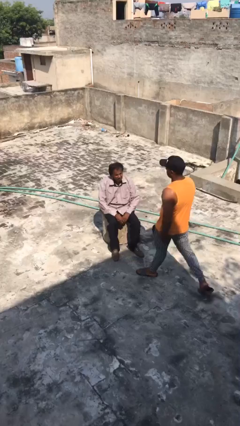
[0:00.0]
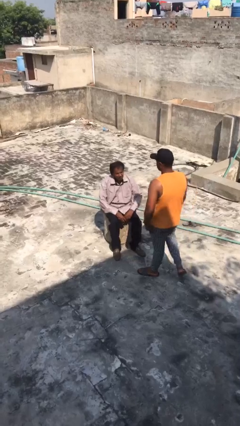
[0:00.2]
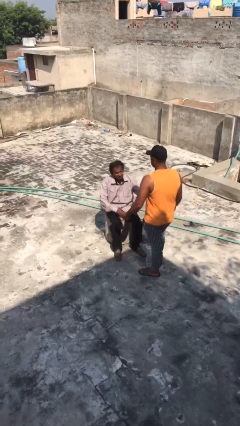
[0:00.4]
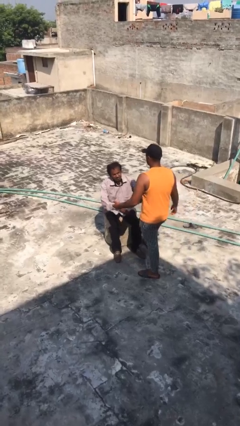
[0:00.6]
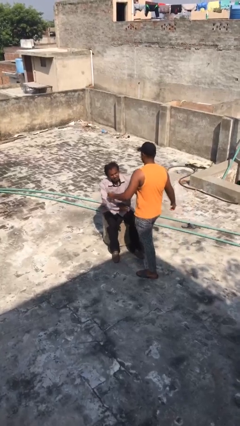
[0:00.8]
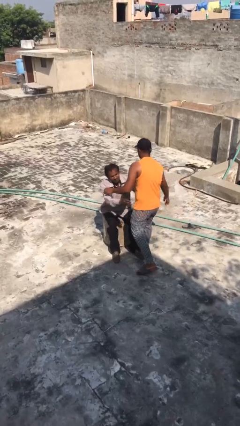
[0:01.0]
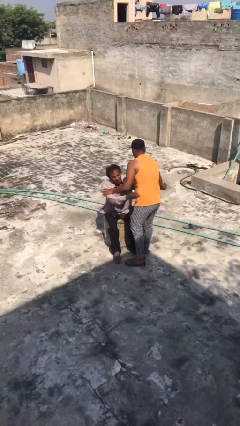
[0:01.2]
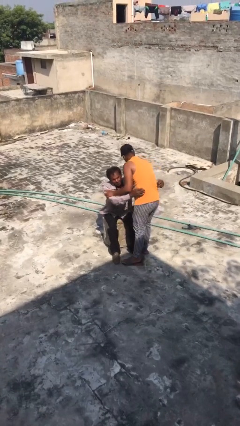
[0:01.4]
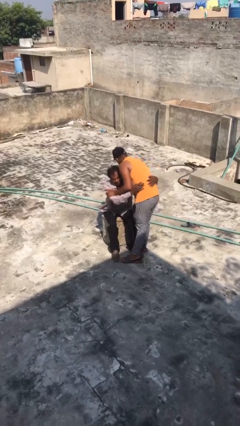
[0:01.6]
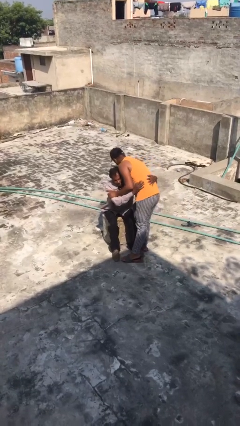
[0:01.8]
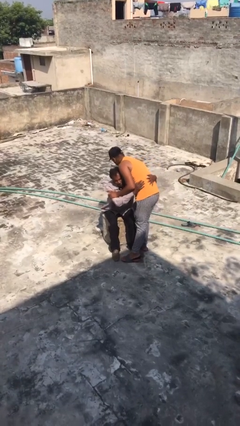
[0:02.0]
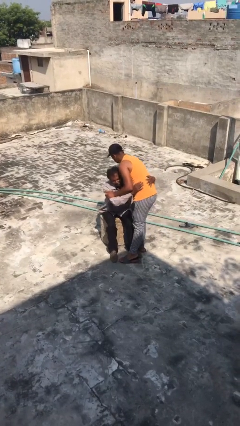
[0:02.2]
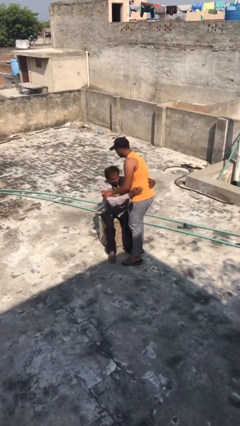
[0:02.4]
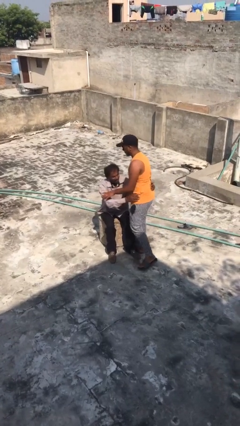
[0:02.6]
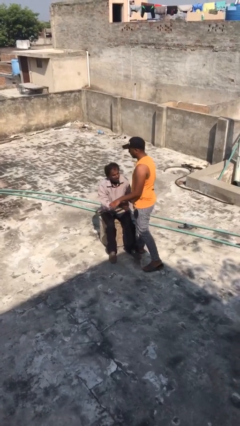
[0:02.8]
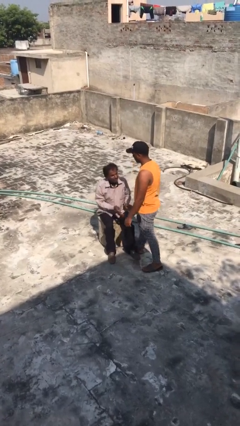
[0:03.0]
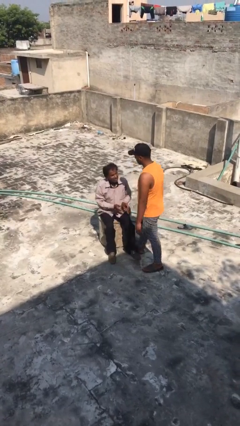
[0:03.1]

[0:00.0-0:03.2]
person embraces person

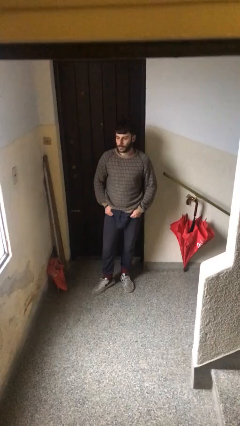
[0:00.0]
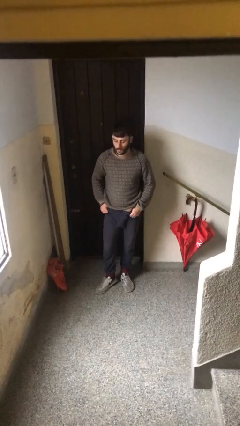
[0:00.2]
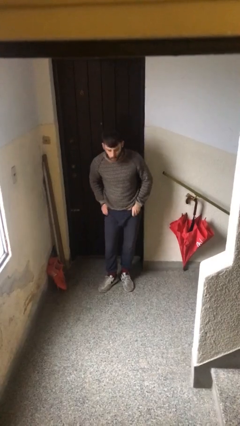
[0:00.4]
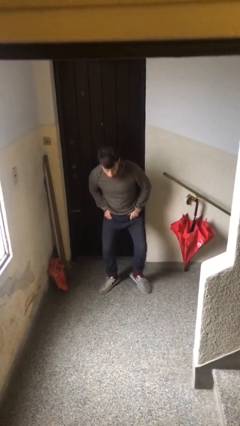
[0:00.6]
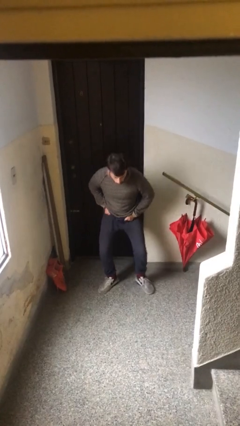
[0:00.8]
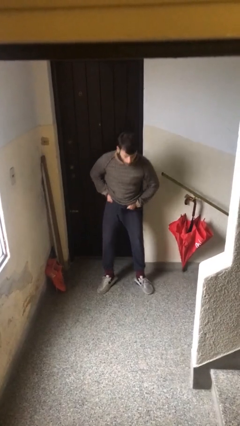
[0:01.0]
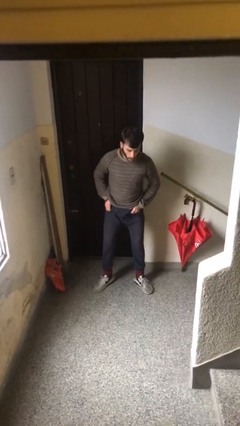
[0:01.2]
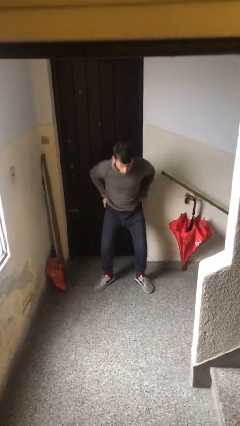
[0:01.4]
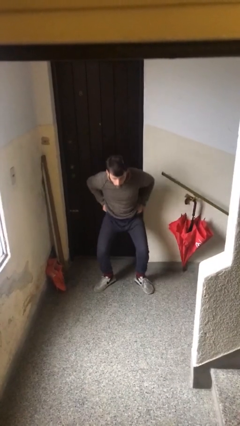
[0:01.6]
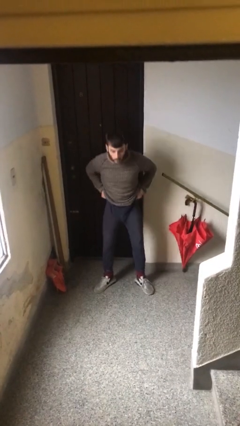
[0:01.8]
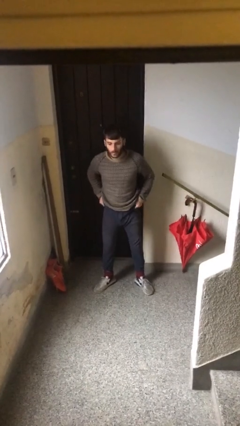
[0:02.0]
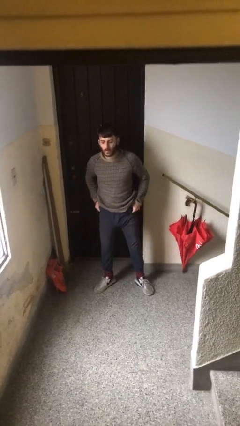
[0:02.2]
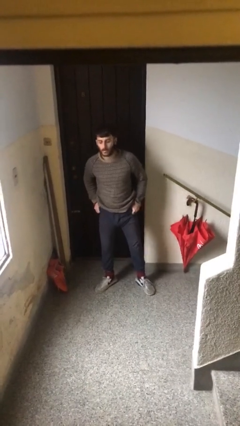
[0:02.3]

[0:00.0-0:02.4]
person hikes up pants

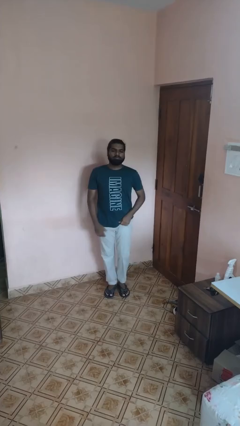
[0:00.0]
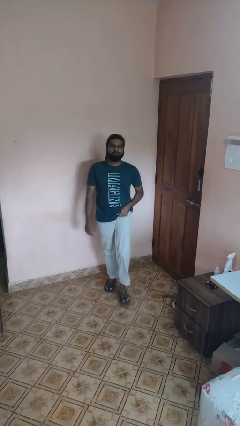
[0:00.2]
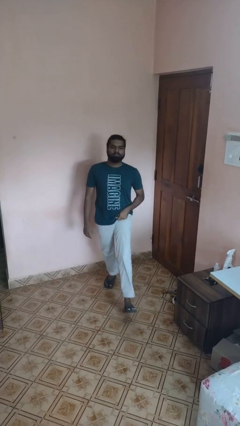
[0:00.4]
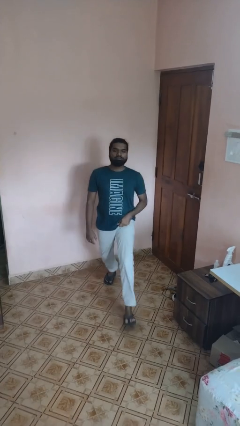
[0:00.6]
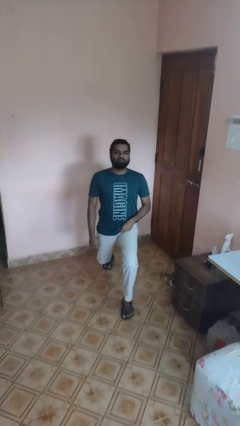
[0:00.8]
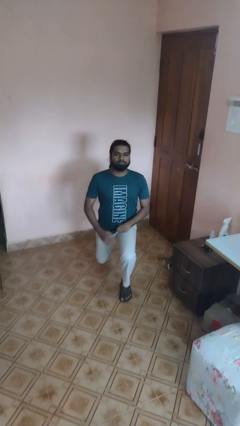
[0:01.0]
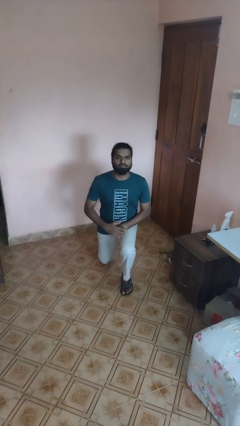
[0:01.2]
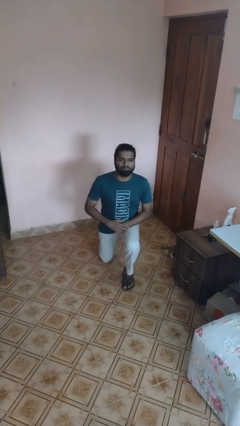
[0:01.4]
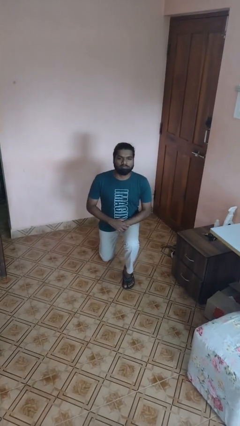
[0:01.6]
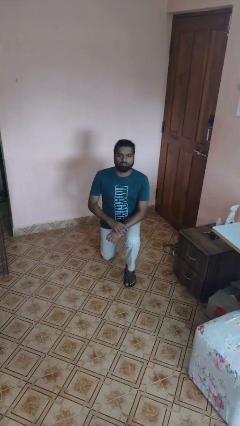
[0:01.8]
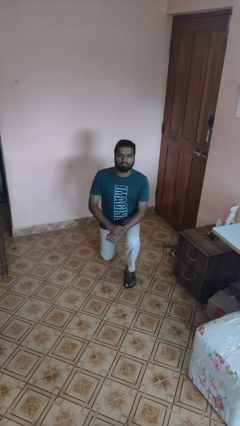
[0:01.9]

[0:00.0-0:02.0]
person kneels

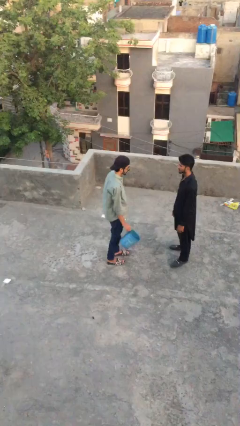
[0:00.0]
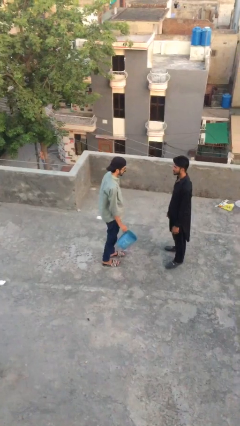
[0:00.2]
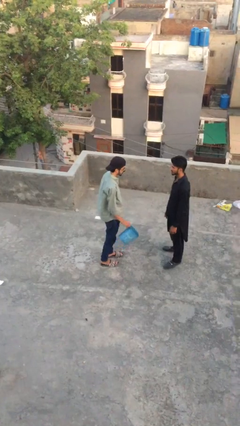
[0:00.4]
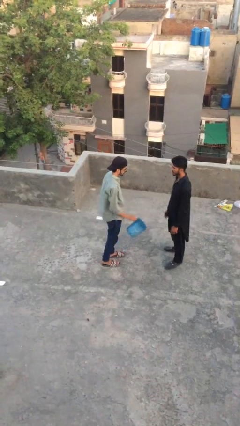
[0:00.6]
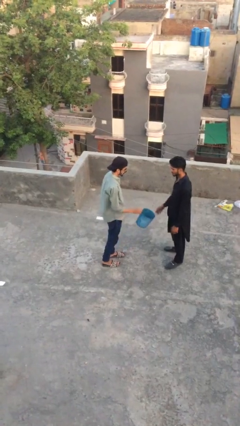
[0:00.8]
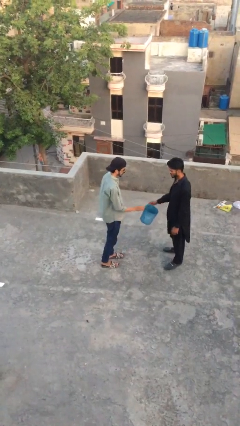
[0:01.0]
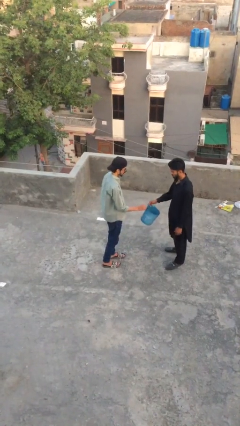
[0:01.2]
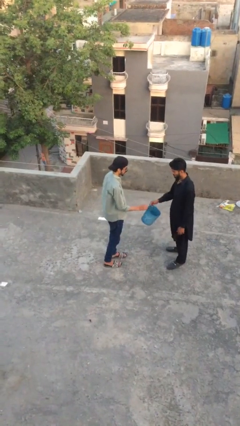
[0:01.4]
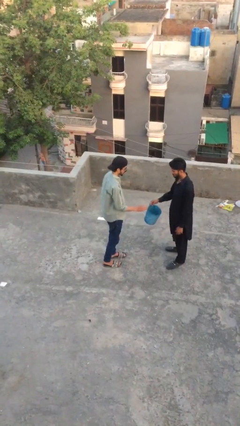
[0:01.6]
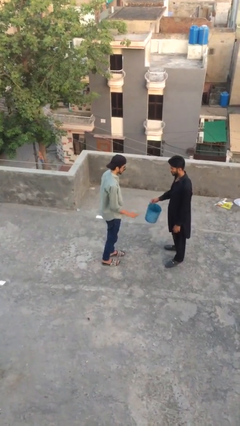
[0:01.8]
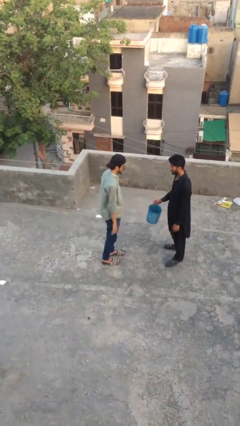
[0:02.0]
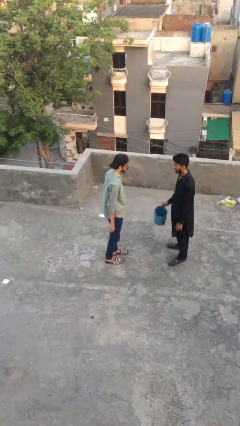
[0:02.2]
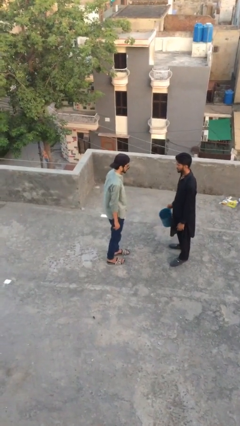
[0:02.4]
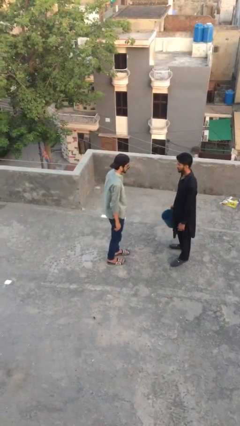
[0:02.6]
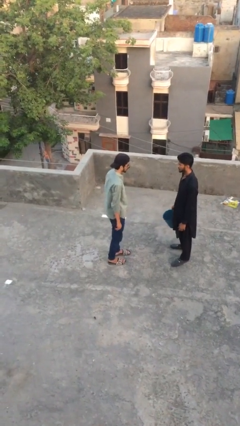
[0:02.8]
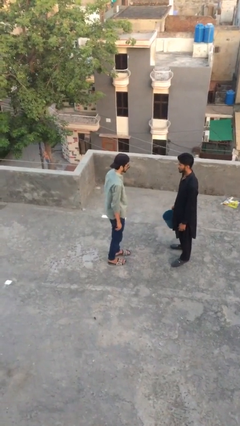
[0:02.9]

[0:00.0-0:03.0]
person transfers object to person

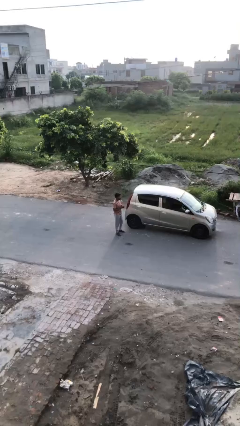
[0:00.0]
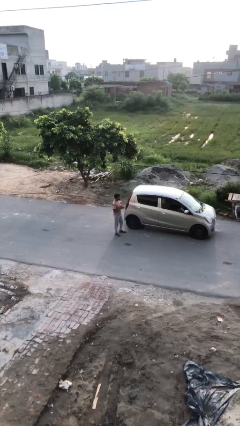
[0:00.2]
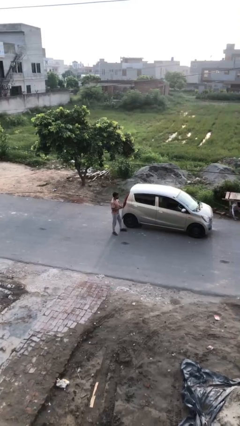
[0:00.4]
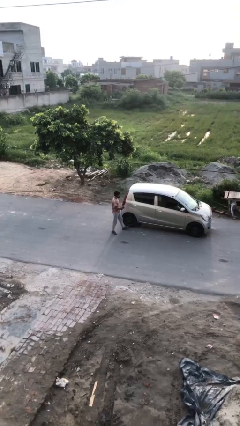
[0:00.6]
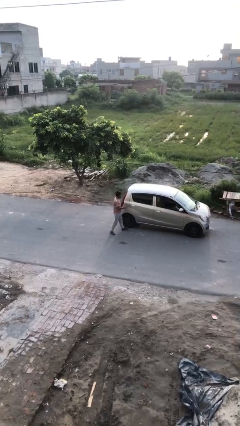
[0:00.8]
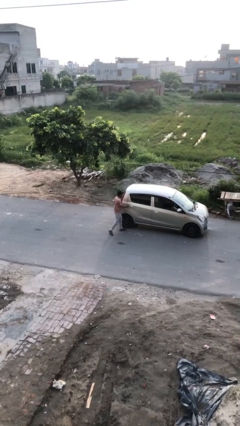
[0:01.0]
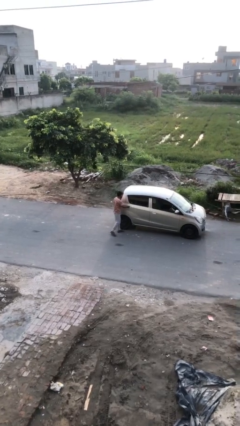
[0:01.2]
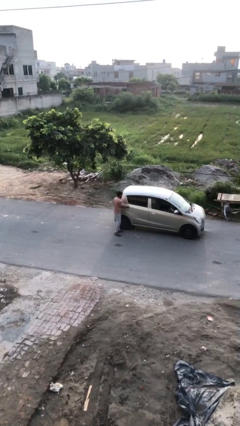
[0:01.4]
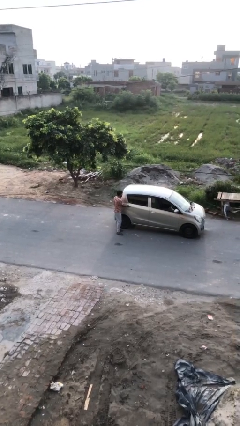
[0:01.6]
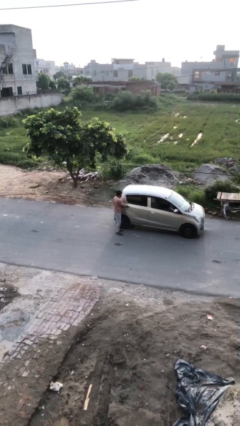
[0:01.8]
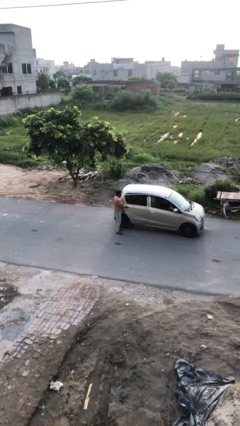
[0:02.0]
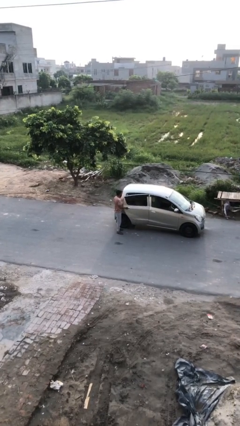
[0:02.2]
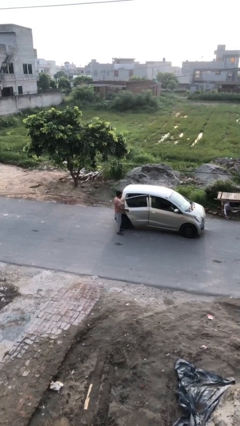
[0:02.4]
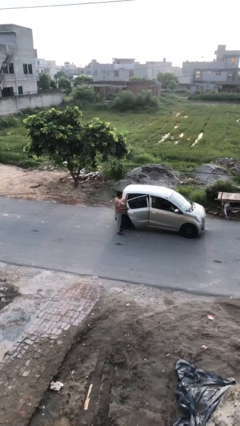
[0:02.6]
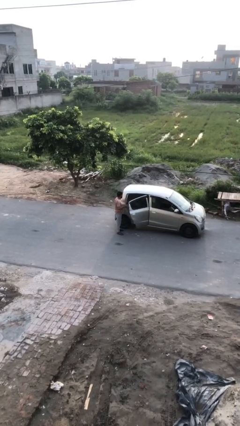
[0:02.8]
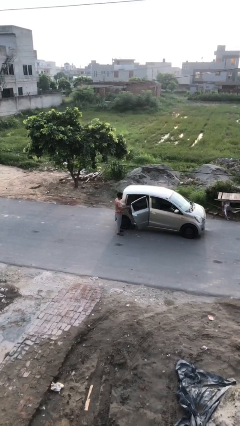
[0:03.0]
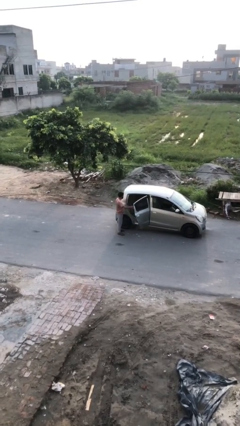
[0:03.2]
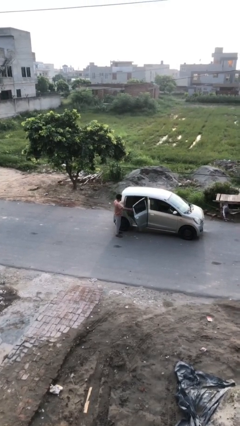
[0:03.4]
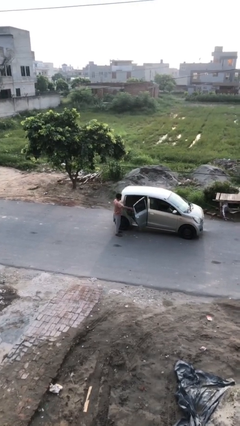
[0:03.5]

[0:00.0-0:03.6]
person opens car door

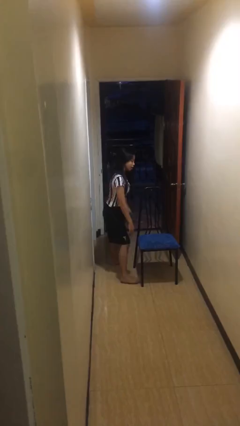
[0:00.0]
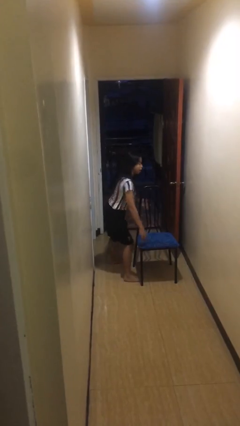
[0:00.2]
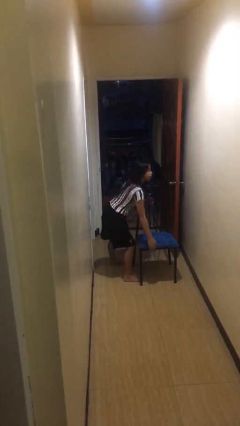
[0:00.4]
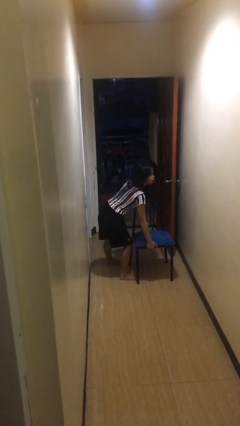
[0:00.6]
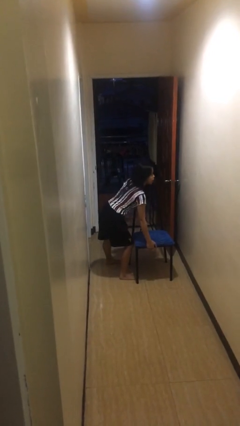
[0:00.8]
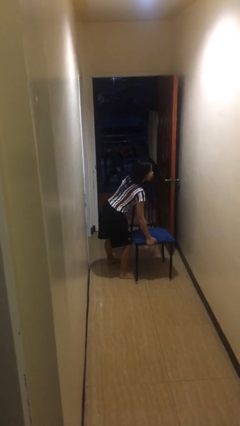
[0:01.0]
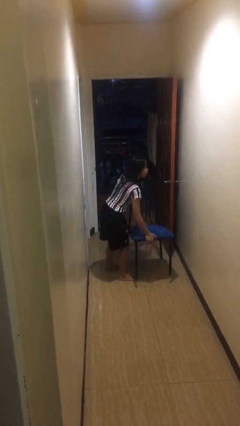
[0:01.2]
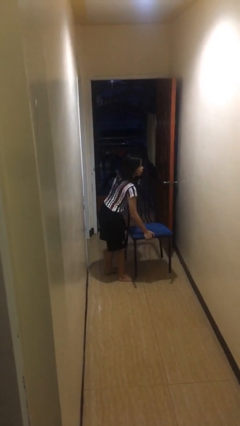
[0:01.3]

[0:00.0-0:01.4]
person picks up object from floor

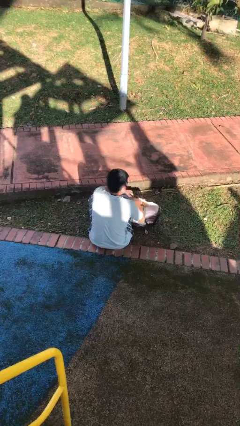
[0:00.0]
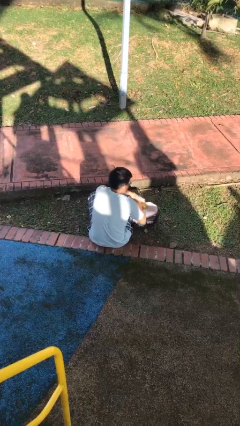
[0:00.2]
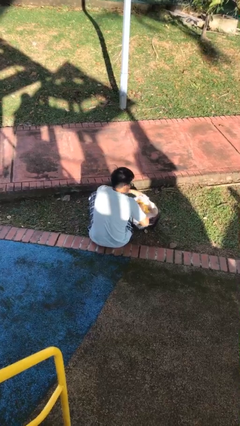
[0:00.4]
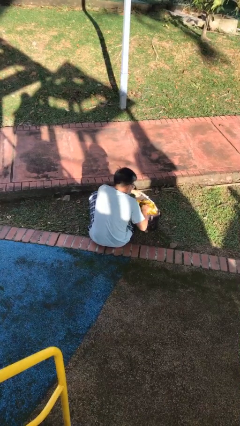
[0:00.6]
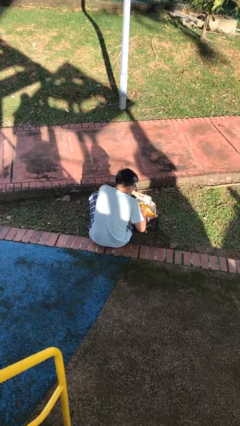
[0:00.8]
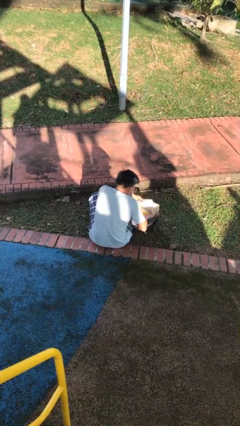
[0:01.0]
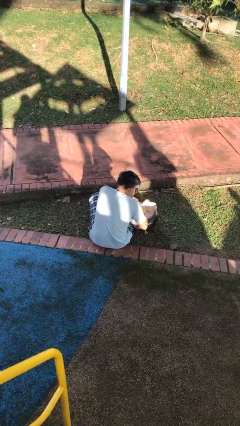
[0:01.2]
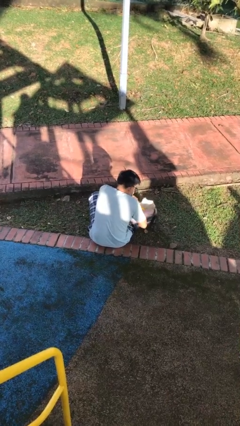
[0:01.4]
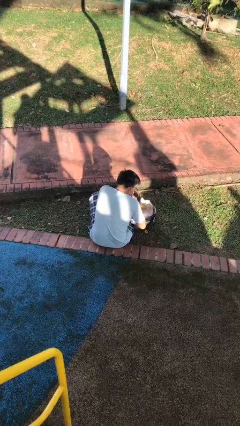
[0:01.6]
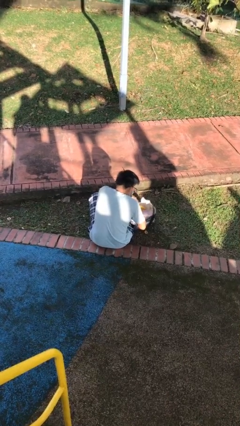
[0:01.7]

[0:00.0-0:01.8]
person searches in bag
